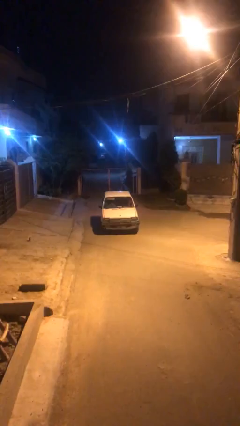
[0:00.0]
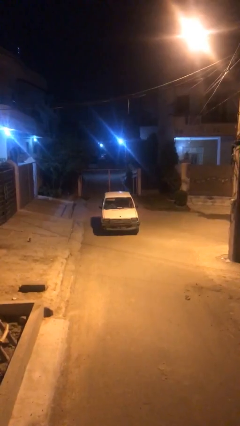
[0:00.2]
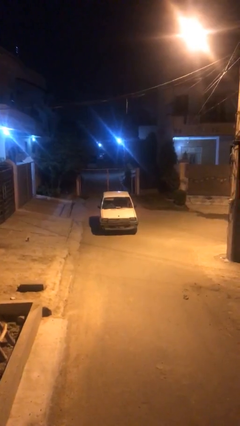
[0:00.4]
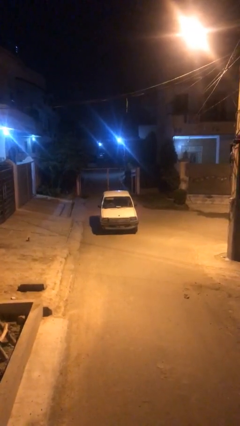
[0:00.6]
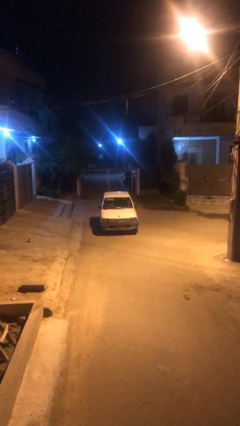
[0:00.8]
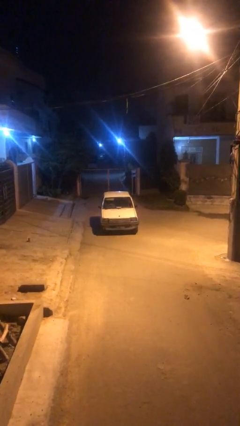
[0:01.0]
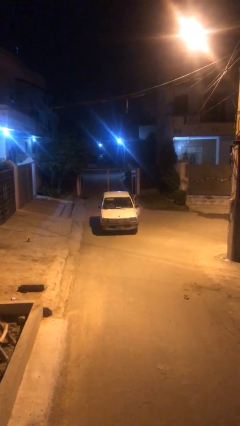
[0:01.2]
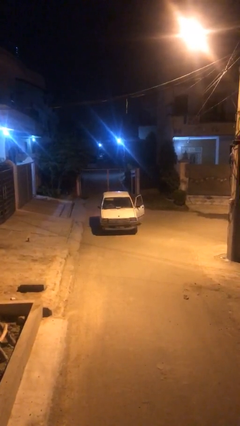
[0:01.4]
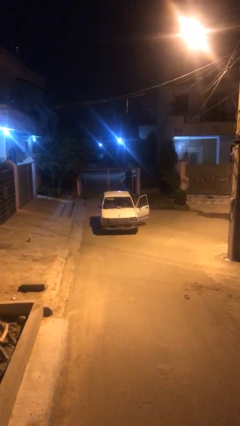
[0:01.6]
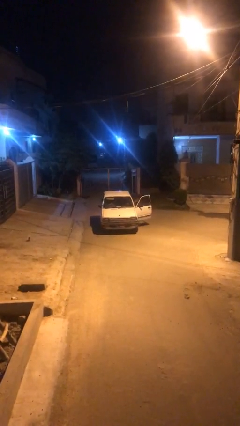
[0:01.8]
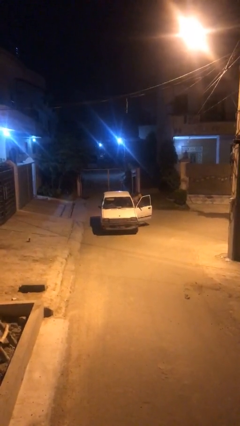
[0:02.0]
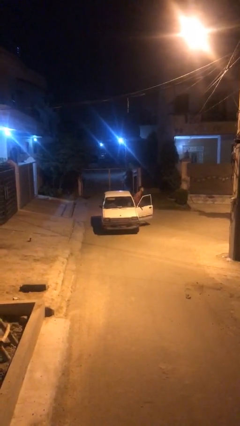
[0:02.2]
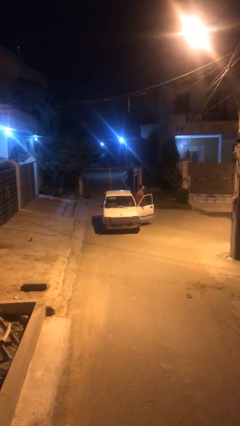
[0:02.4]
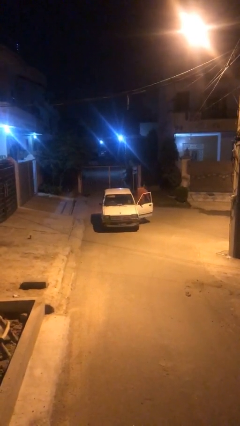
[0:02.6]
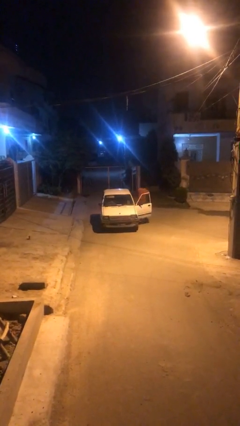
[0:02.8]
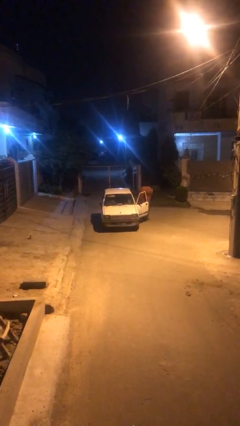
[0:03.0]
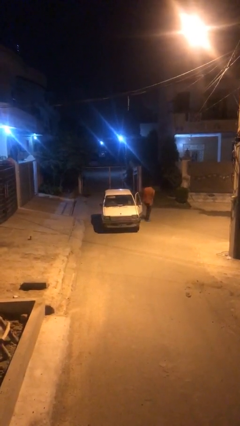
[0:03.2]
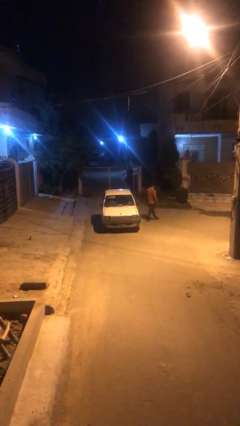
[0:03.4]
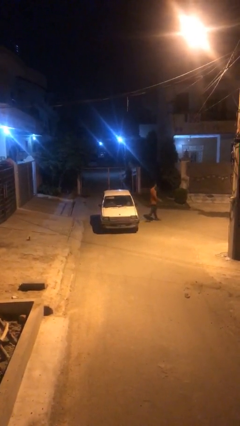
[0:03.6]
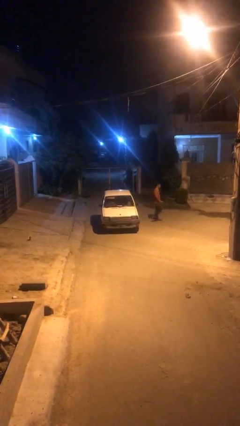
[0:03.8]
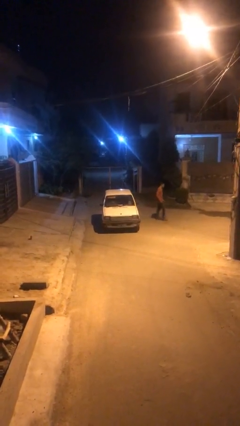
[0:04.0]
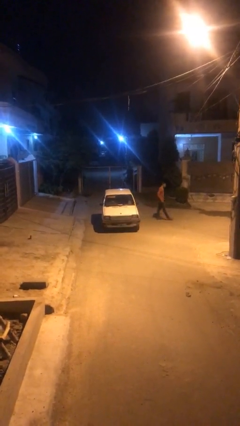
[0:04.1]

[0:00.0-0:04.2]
car drops off person

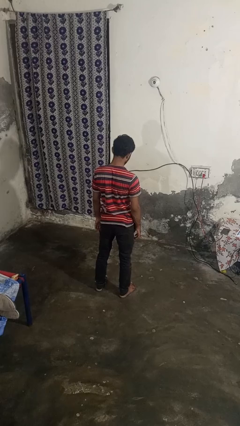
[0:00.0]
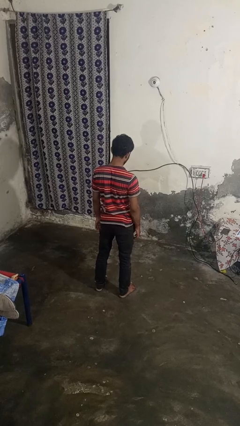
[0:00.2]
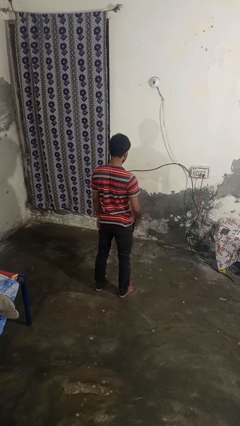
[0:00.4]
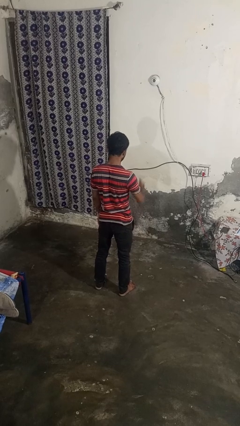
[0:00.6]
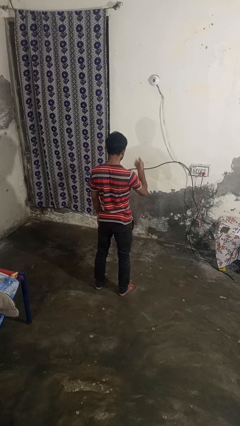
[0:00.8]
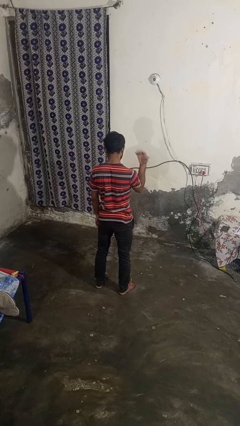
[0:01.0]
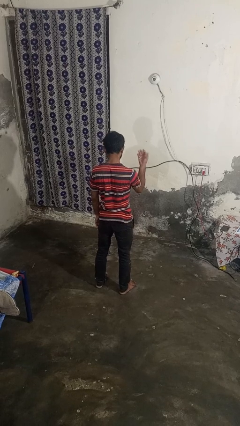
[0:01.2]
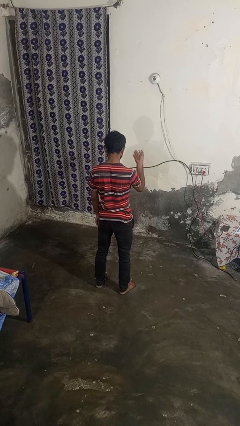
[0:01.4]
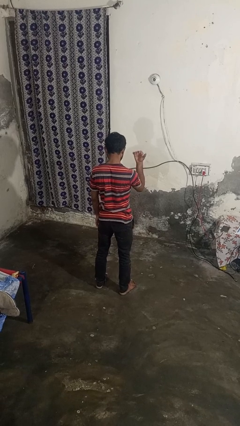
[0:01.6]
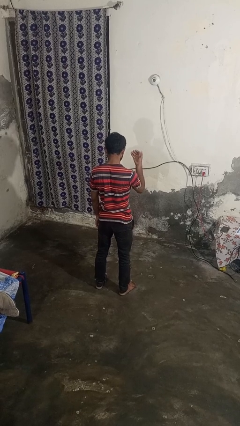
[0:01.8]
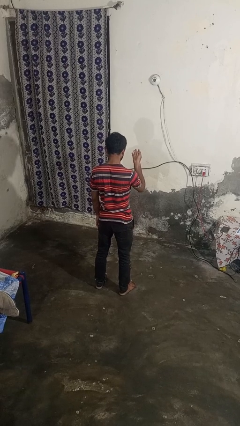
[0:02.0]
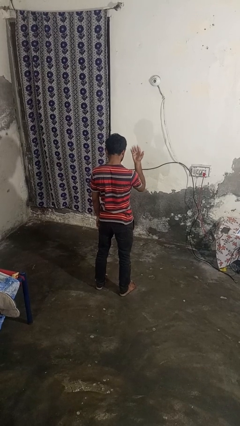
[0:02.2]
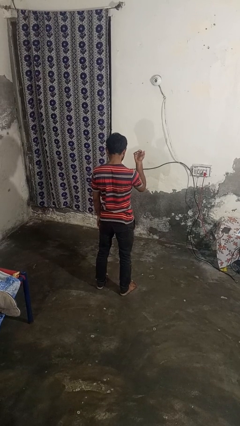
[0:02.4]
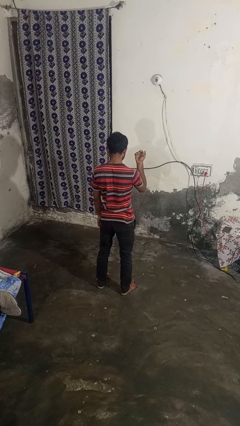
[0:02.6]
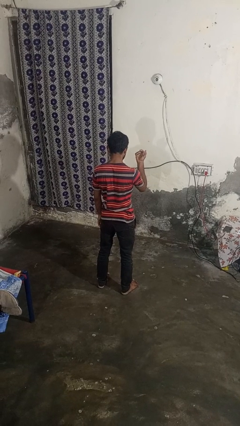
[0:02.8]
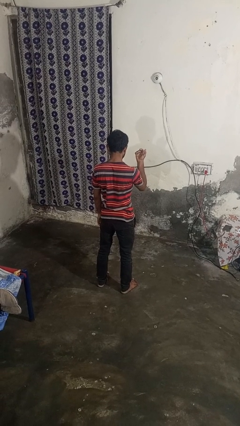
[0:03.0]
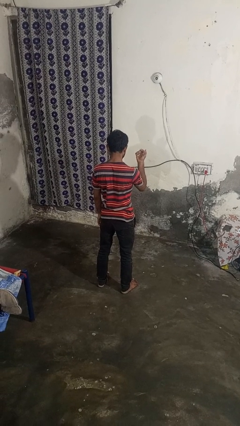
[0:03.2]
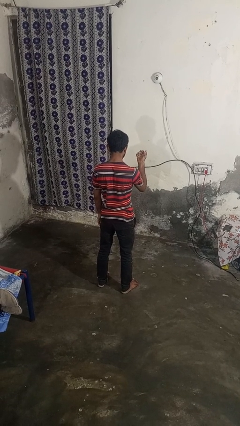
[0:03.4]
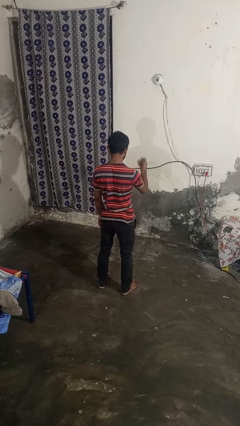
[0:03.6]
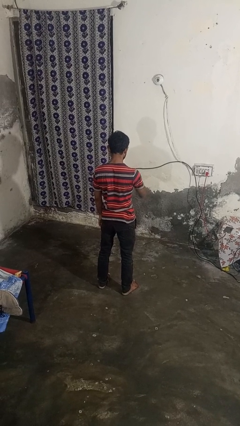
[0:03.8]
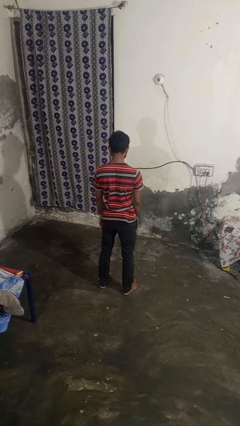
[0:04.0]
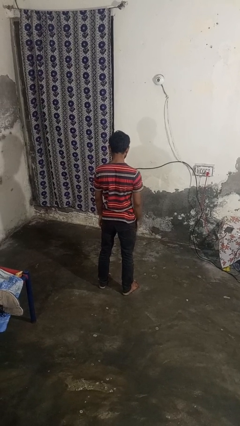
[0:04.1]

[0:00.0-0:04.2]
person gestures come here

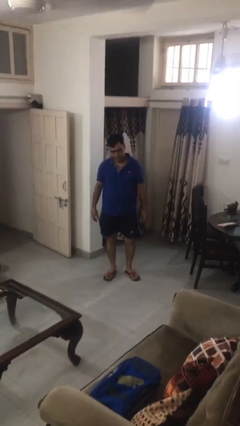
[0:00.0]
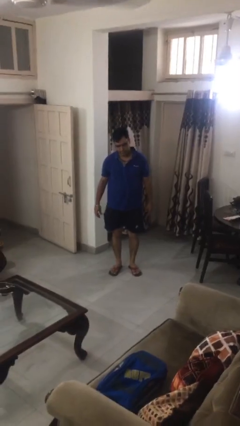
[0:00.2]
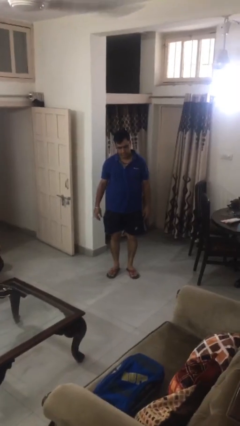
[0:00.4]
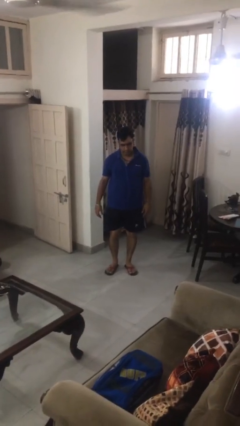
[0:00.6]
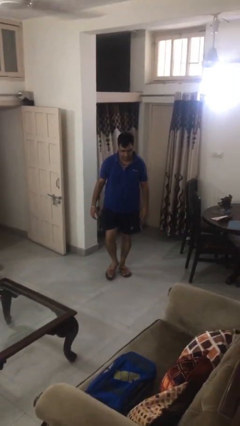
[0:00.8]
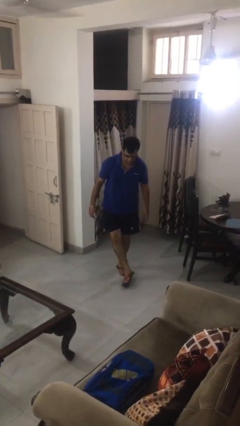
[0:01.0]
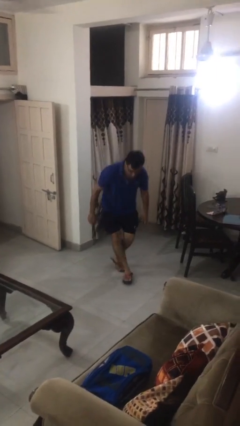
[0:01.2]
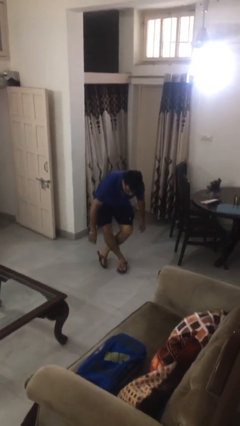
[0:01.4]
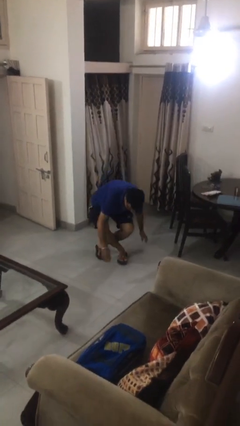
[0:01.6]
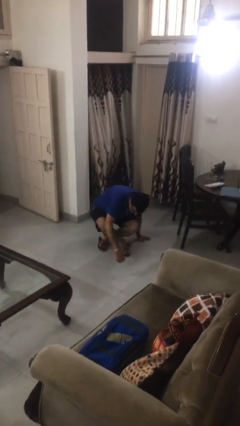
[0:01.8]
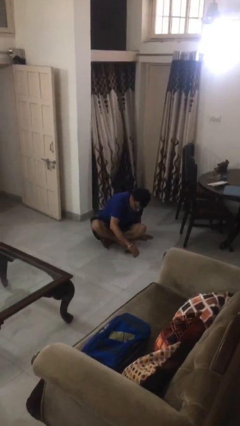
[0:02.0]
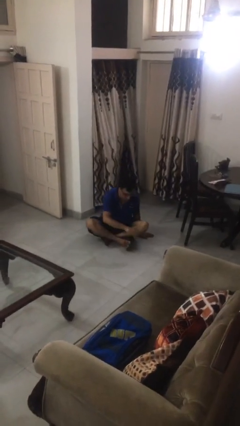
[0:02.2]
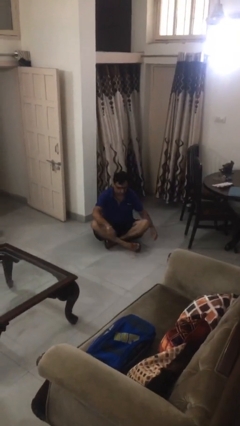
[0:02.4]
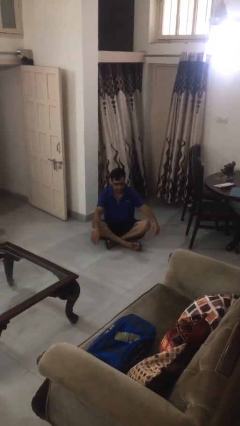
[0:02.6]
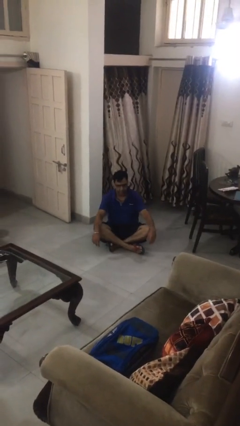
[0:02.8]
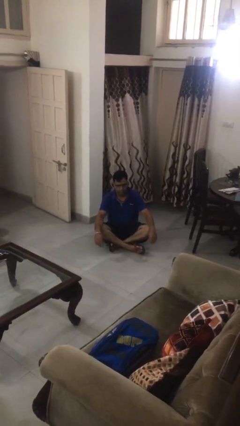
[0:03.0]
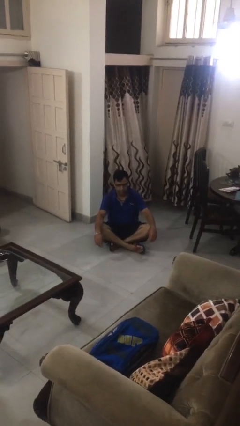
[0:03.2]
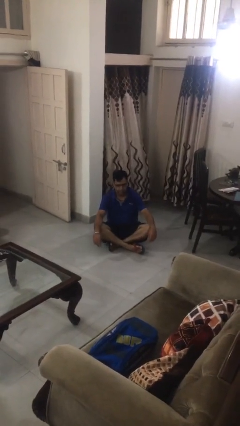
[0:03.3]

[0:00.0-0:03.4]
person sits crisscross

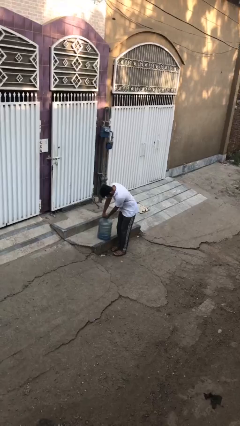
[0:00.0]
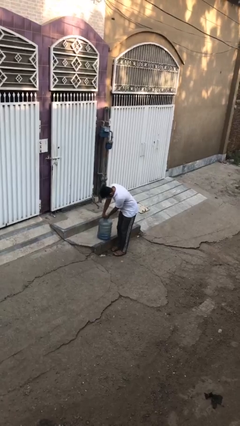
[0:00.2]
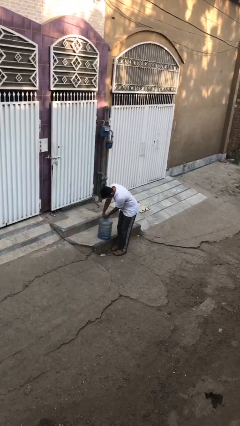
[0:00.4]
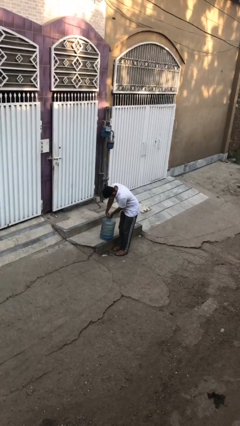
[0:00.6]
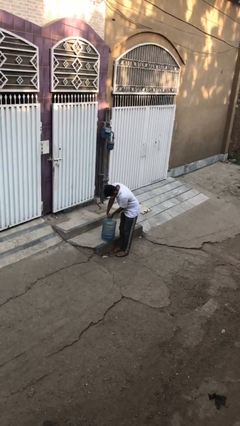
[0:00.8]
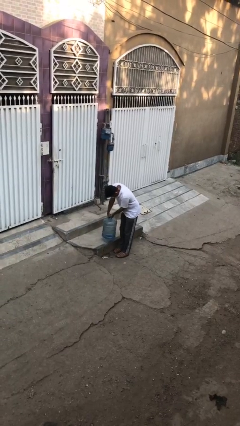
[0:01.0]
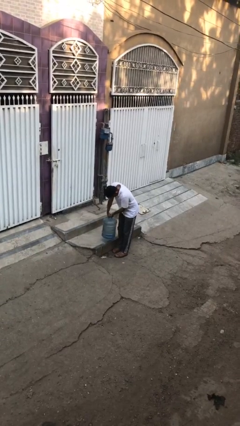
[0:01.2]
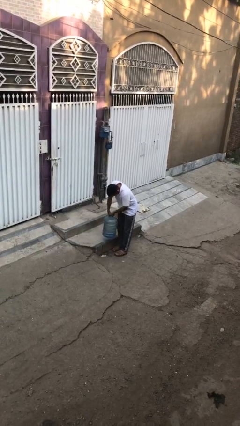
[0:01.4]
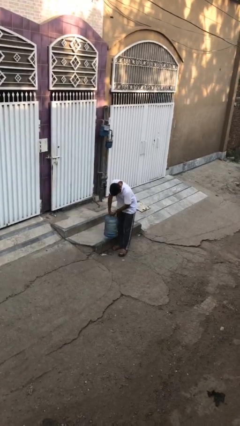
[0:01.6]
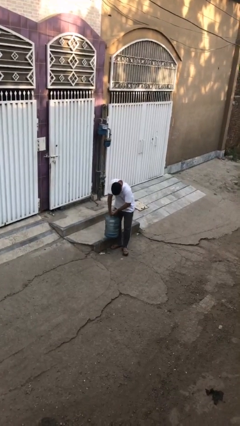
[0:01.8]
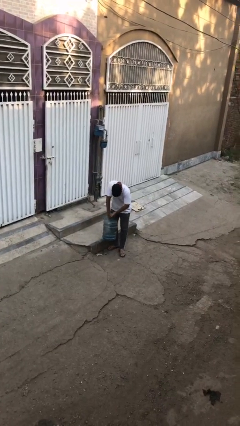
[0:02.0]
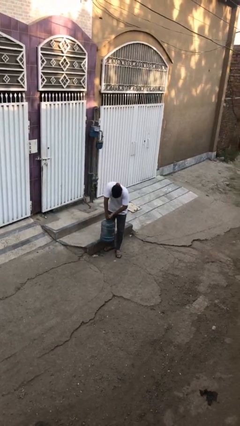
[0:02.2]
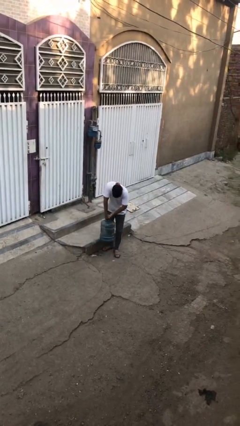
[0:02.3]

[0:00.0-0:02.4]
person picks up object from floor

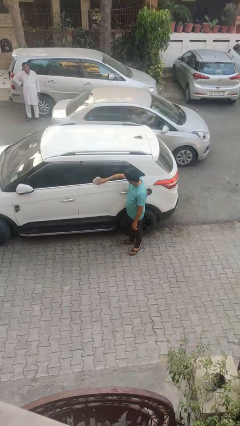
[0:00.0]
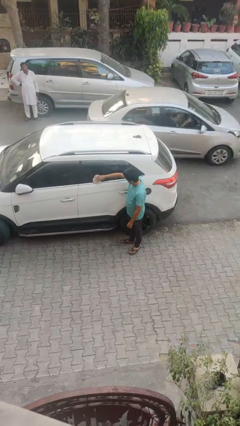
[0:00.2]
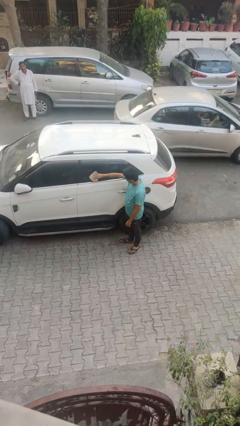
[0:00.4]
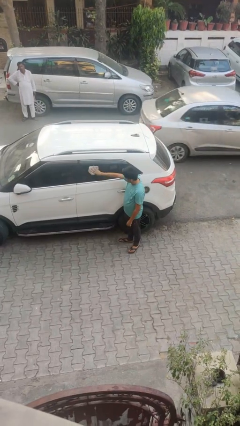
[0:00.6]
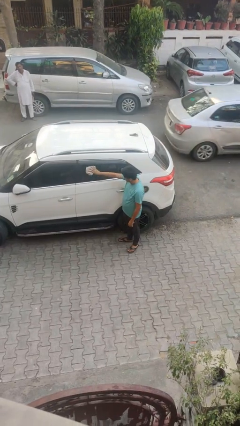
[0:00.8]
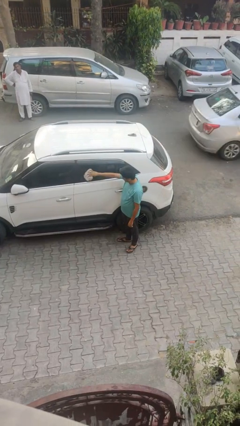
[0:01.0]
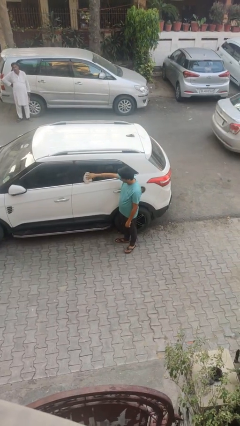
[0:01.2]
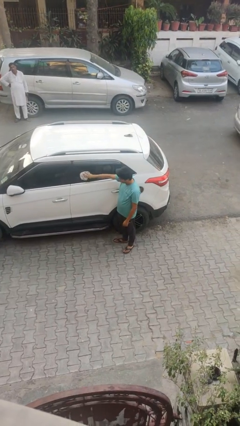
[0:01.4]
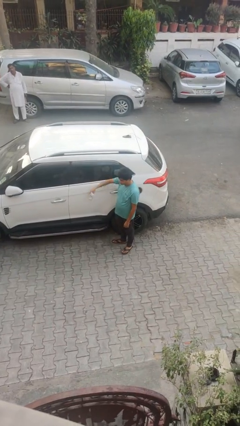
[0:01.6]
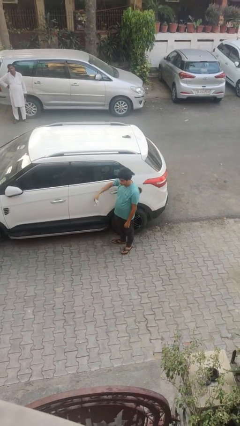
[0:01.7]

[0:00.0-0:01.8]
person polishes car with rag

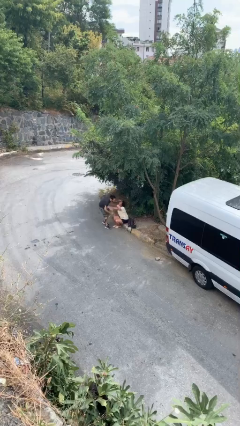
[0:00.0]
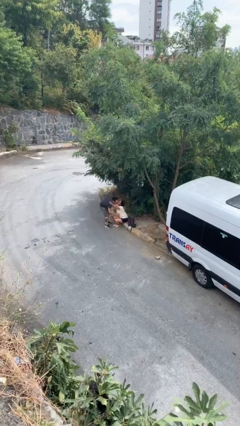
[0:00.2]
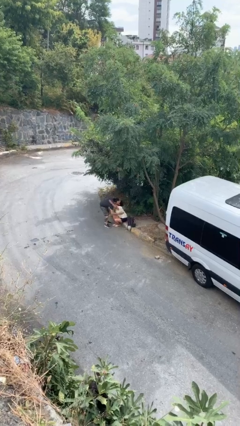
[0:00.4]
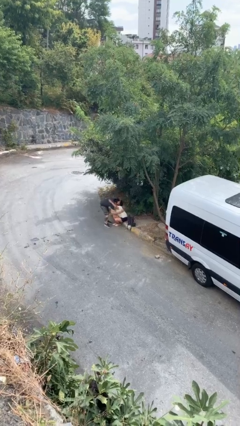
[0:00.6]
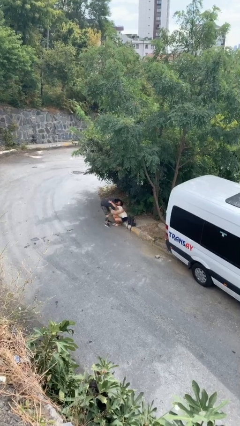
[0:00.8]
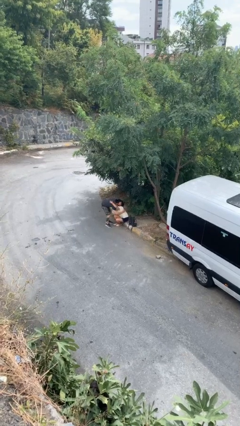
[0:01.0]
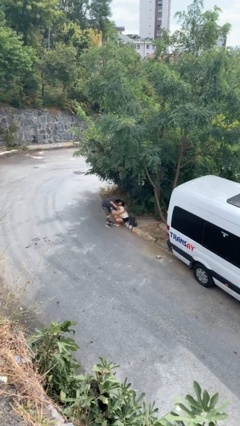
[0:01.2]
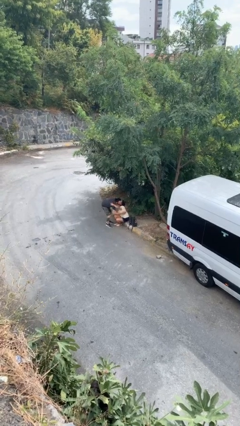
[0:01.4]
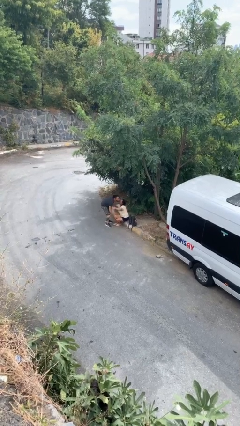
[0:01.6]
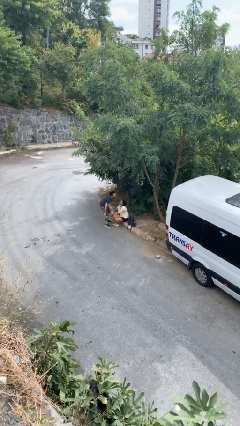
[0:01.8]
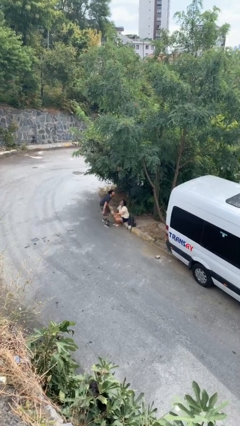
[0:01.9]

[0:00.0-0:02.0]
person embraces person
